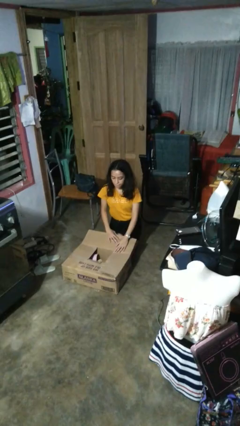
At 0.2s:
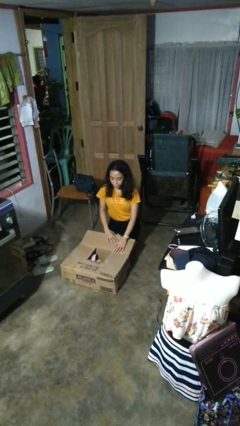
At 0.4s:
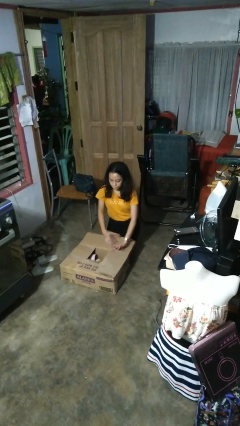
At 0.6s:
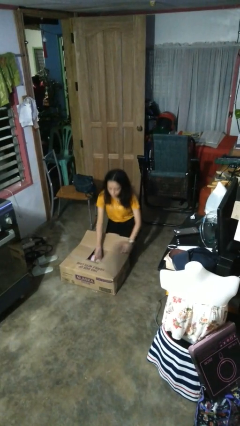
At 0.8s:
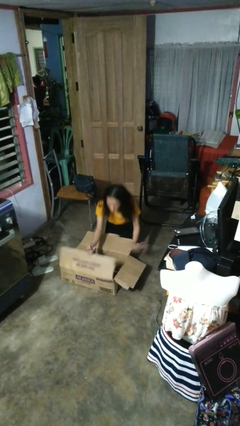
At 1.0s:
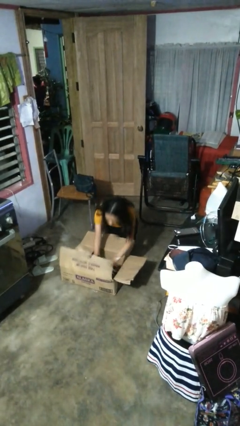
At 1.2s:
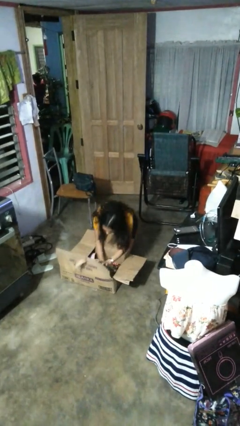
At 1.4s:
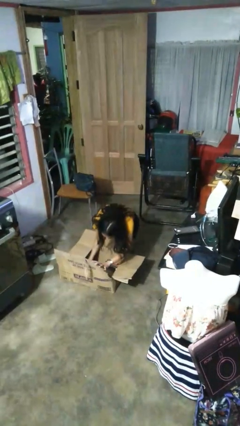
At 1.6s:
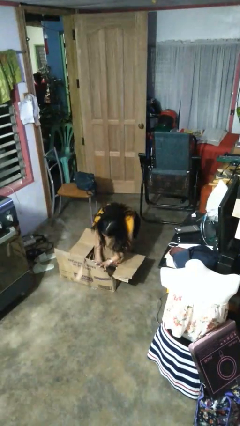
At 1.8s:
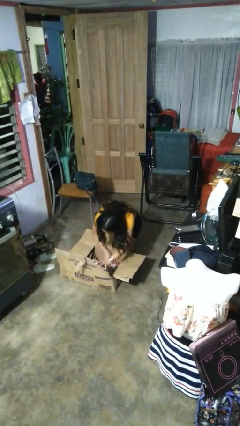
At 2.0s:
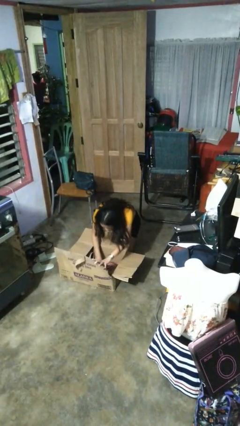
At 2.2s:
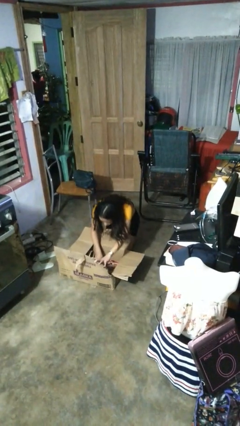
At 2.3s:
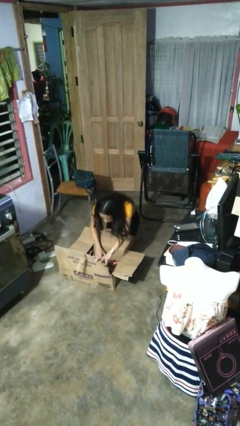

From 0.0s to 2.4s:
person searches in box

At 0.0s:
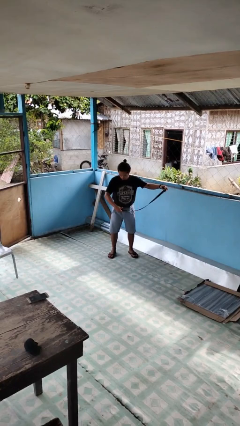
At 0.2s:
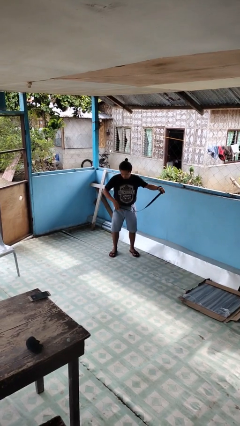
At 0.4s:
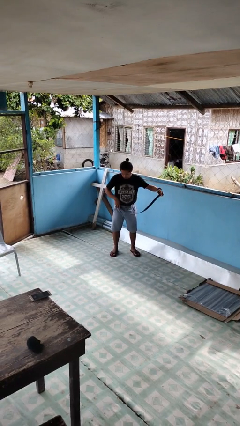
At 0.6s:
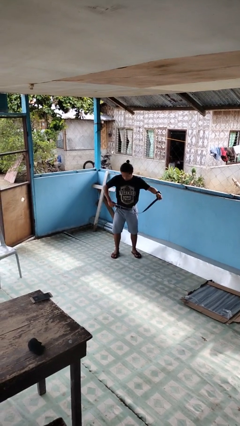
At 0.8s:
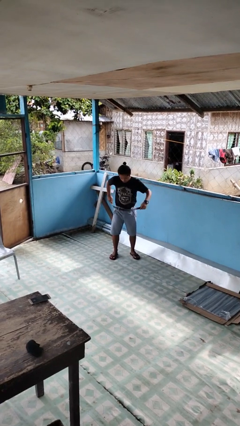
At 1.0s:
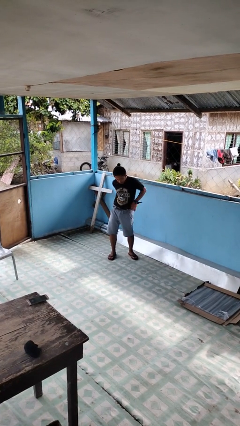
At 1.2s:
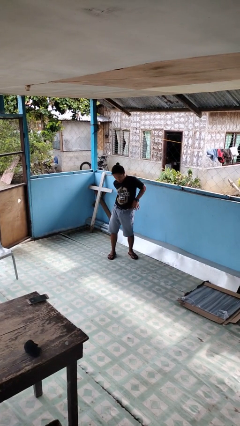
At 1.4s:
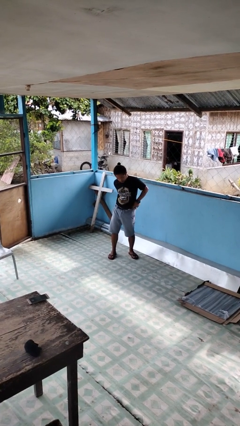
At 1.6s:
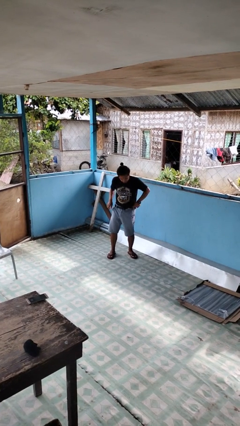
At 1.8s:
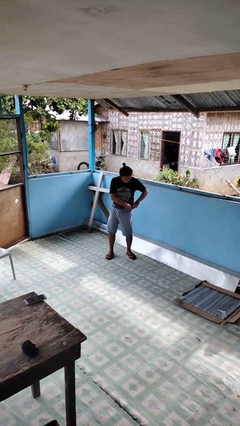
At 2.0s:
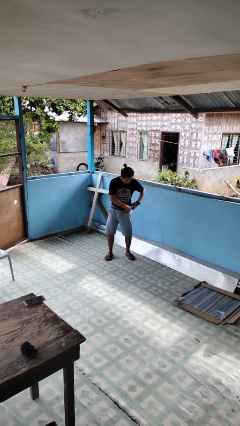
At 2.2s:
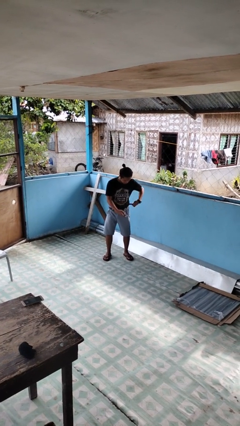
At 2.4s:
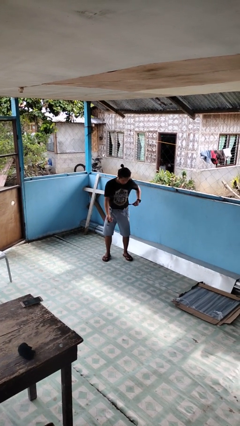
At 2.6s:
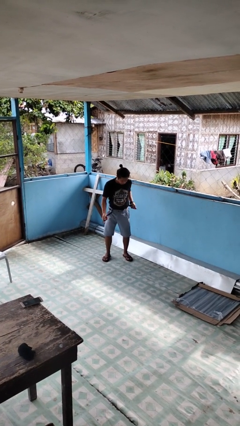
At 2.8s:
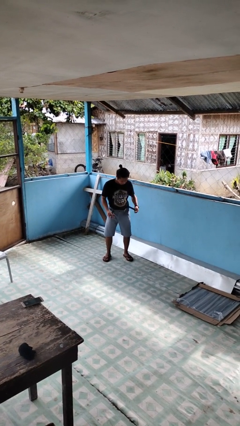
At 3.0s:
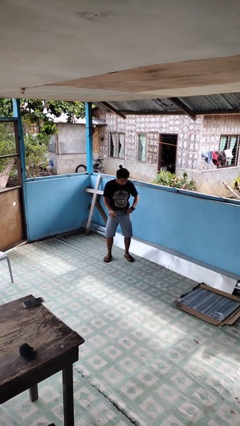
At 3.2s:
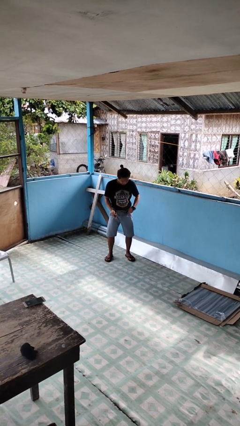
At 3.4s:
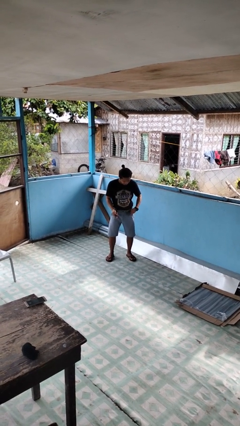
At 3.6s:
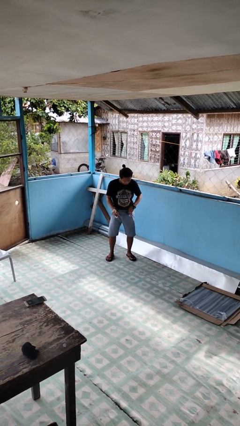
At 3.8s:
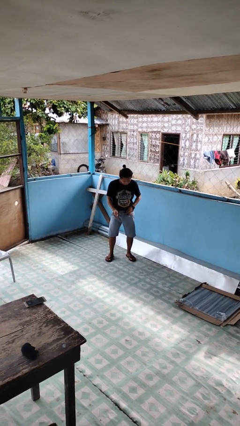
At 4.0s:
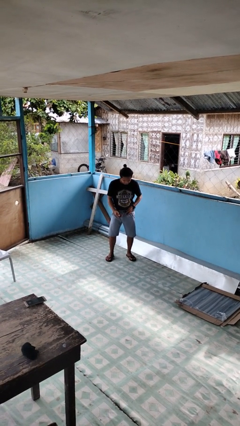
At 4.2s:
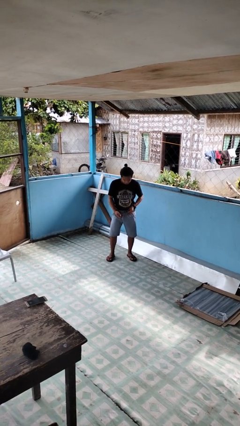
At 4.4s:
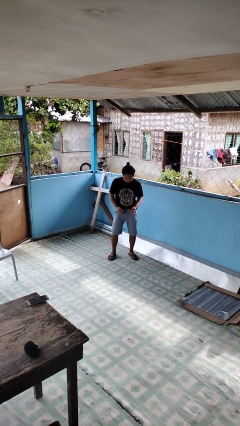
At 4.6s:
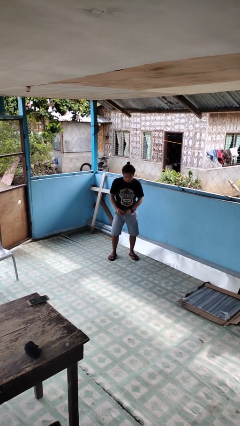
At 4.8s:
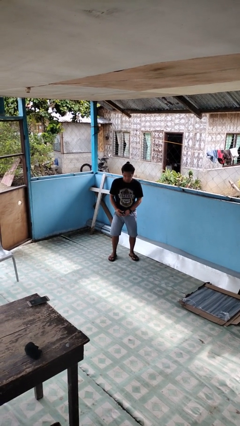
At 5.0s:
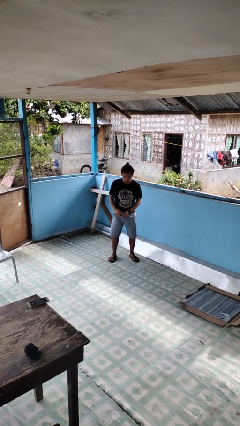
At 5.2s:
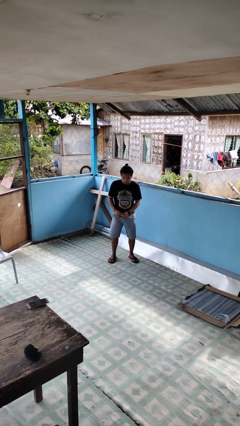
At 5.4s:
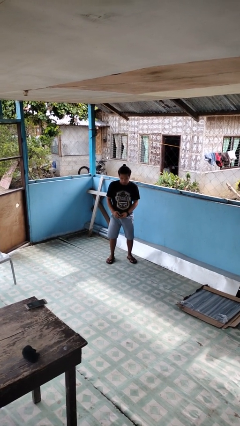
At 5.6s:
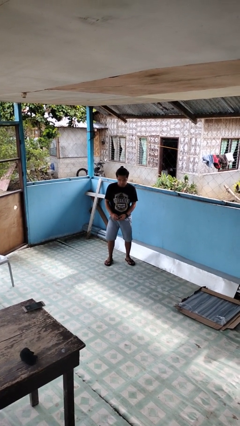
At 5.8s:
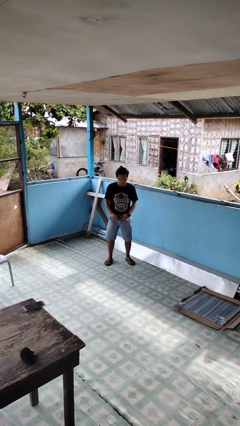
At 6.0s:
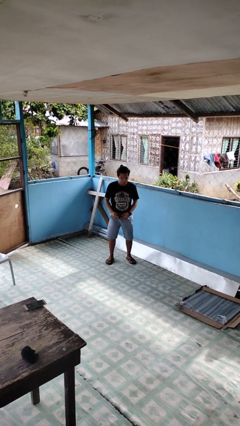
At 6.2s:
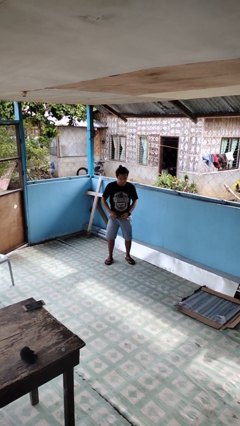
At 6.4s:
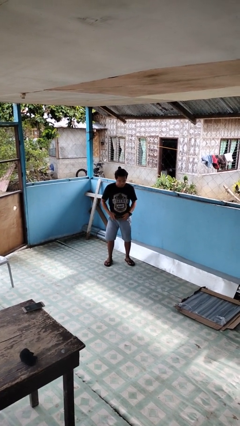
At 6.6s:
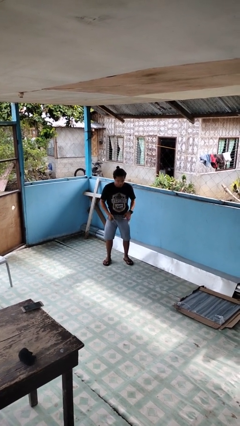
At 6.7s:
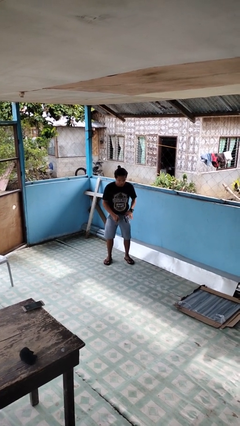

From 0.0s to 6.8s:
person puts on belt

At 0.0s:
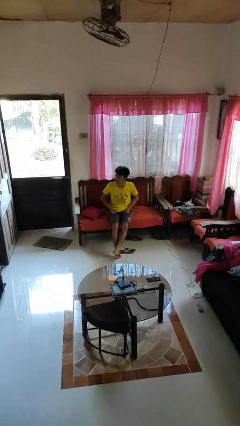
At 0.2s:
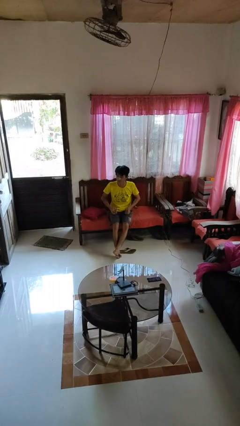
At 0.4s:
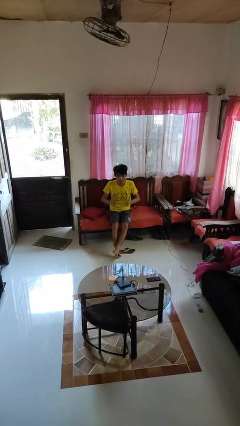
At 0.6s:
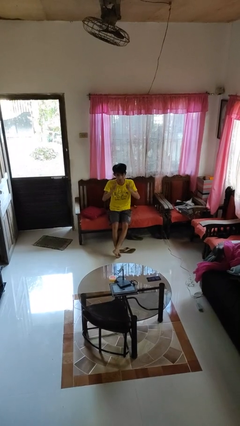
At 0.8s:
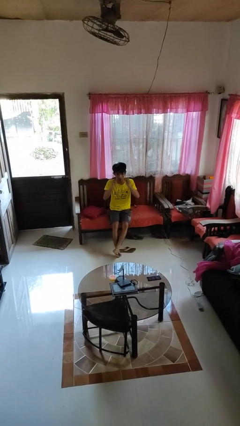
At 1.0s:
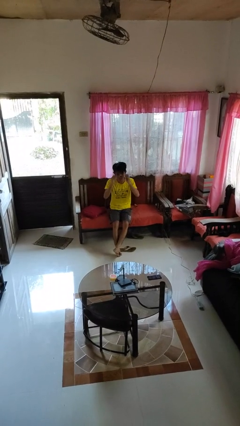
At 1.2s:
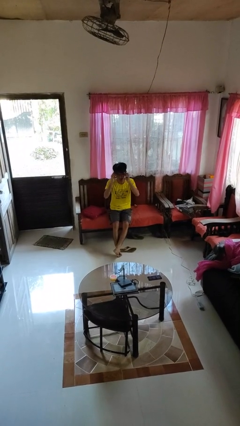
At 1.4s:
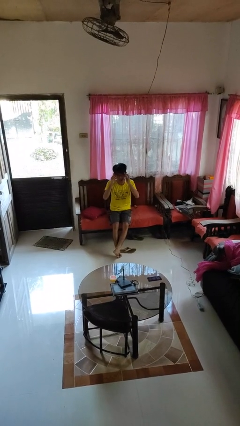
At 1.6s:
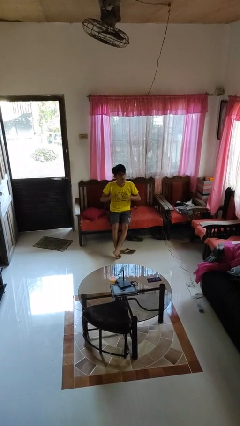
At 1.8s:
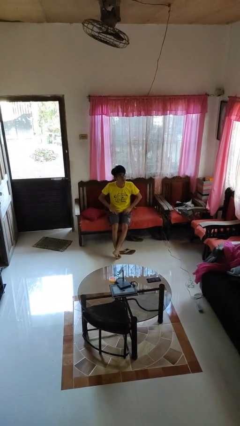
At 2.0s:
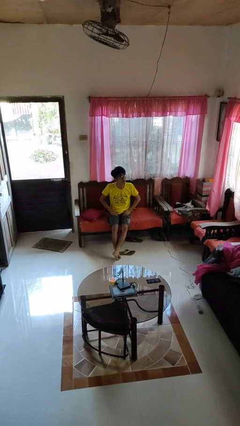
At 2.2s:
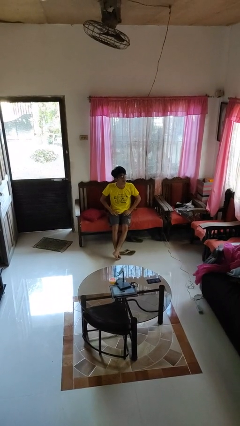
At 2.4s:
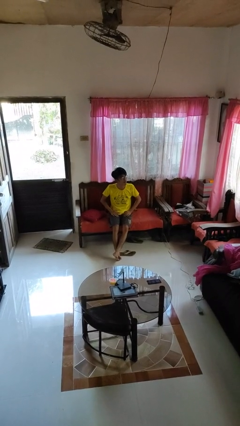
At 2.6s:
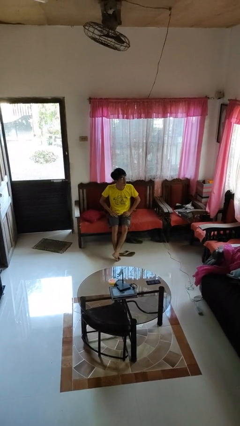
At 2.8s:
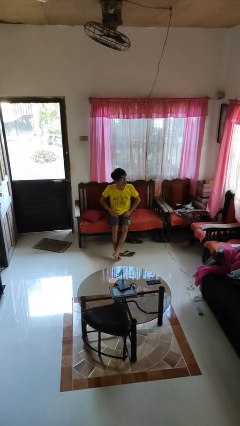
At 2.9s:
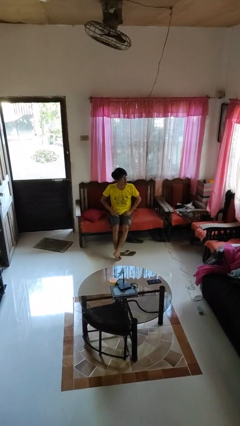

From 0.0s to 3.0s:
person puts on glasses

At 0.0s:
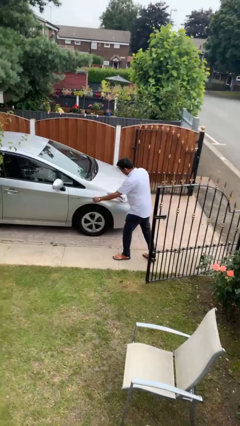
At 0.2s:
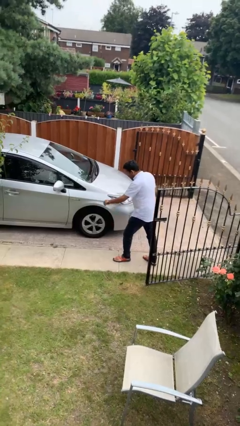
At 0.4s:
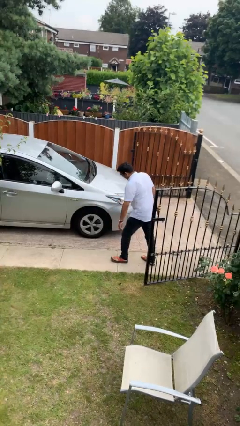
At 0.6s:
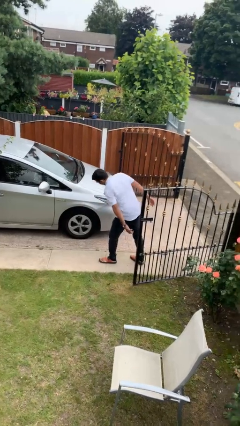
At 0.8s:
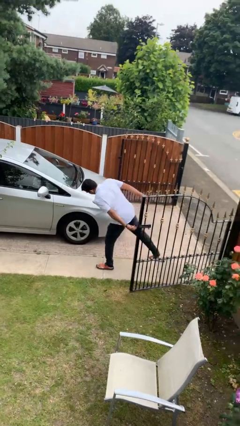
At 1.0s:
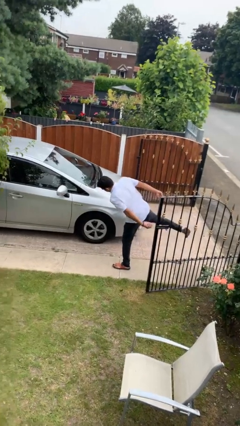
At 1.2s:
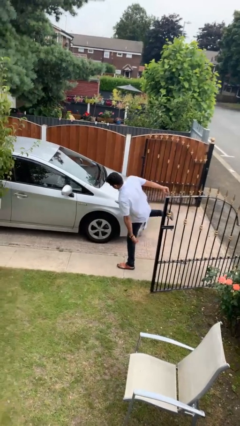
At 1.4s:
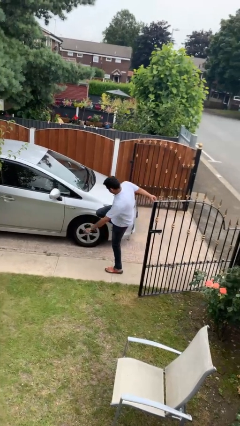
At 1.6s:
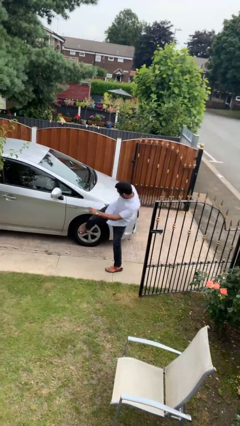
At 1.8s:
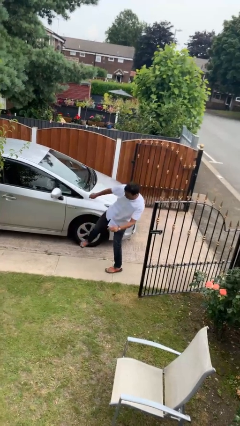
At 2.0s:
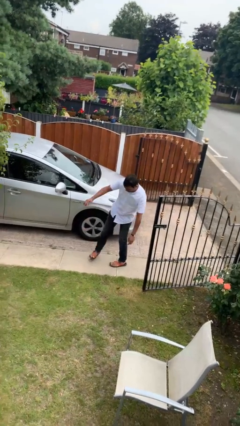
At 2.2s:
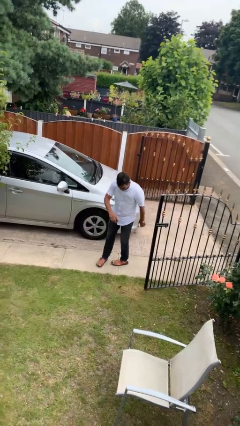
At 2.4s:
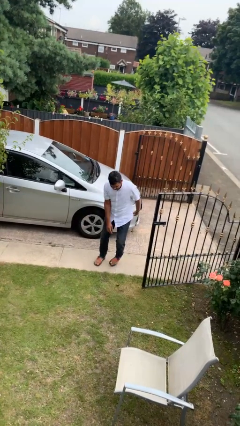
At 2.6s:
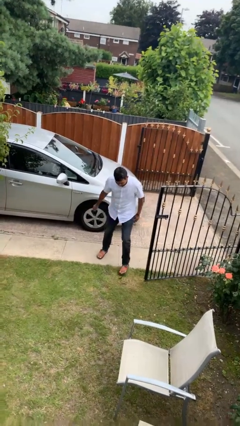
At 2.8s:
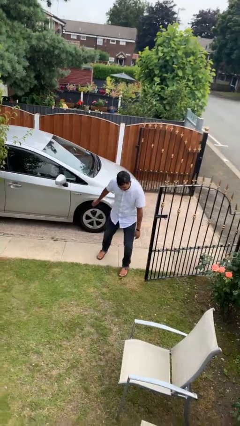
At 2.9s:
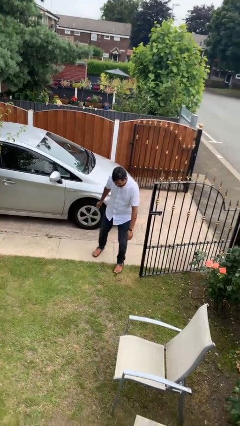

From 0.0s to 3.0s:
person kicks car tires

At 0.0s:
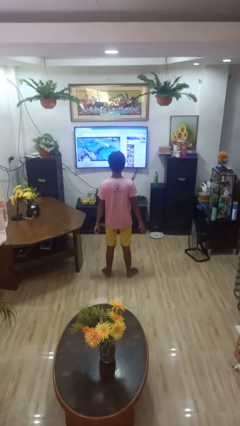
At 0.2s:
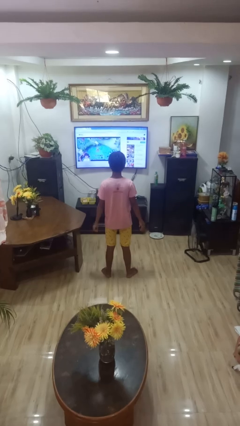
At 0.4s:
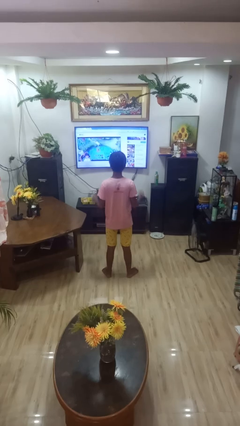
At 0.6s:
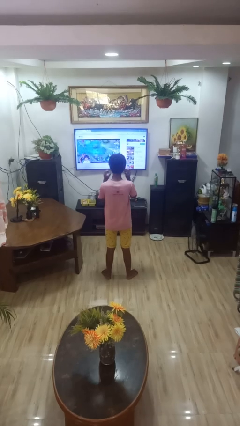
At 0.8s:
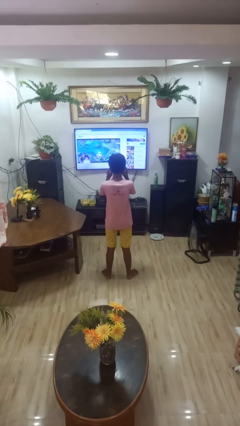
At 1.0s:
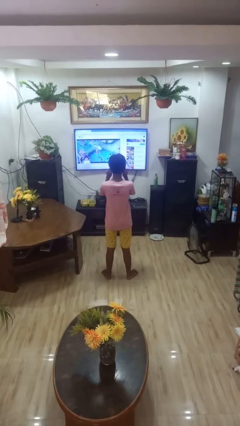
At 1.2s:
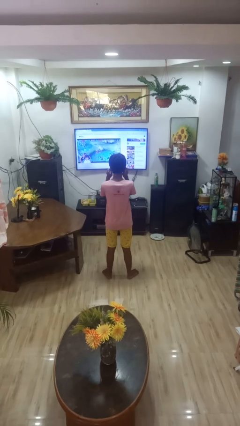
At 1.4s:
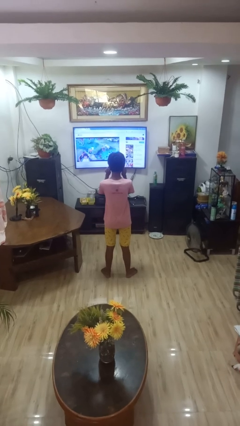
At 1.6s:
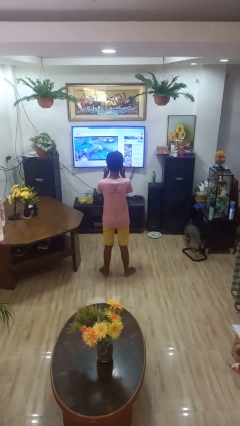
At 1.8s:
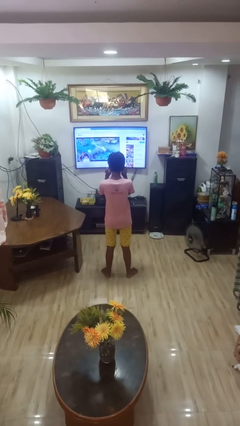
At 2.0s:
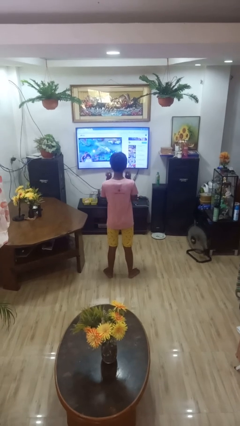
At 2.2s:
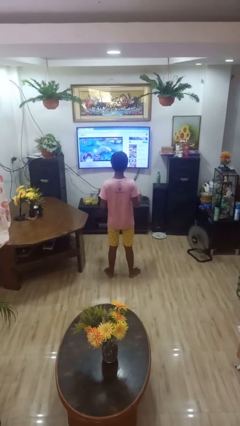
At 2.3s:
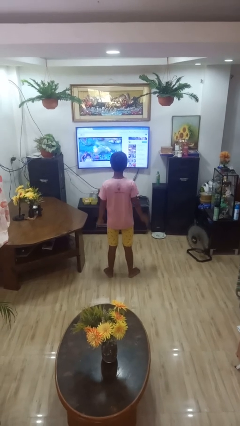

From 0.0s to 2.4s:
person touches earlobe
